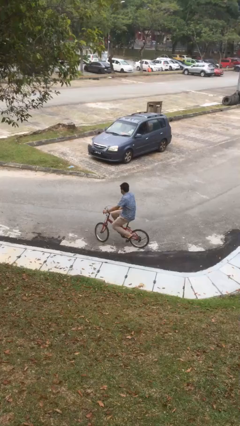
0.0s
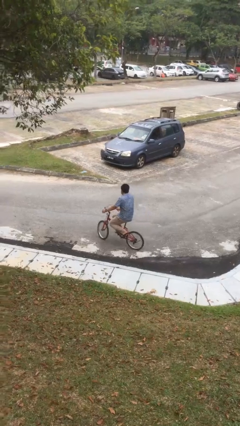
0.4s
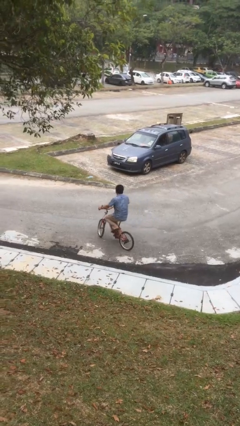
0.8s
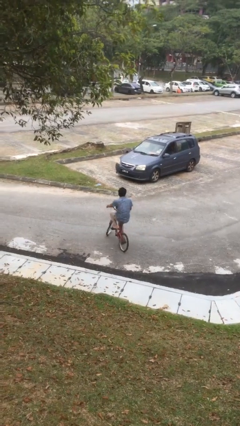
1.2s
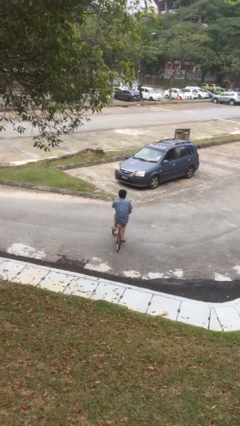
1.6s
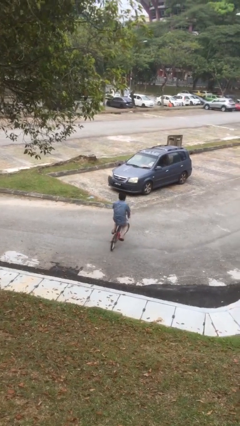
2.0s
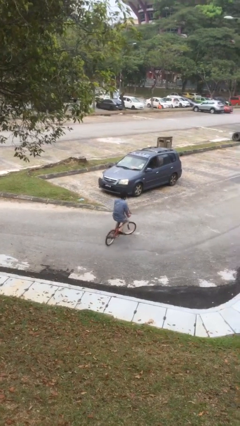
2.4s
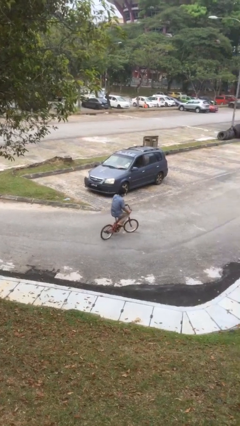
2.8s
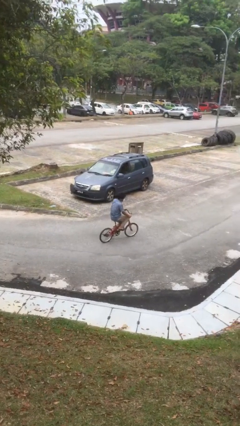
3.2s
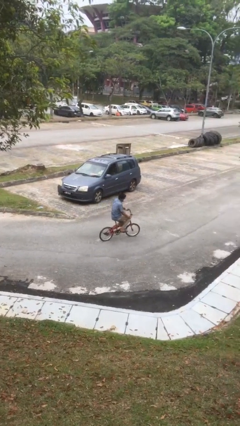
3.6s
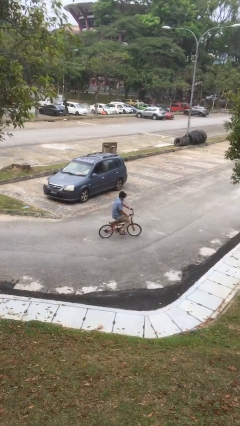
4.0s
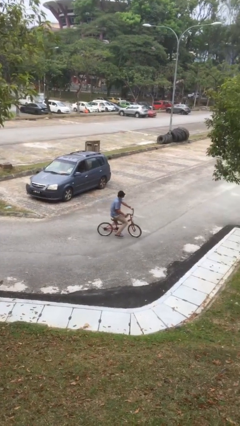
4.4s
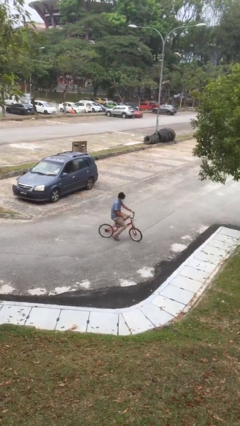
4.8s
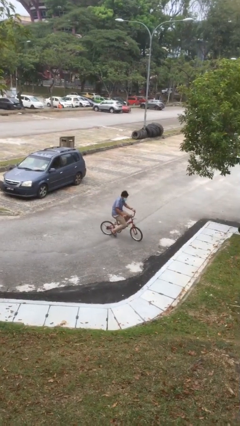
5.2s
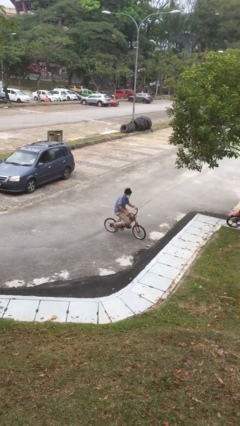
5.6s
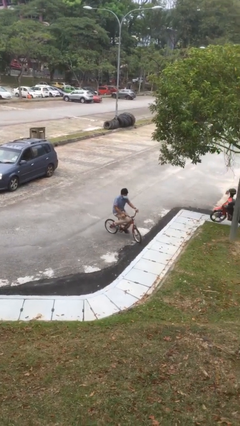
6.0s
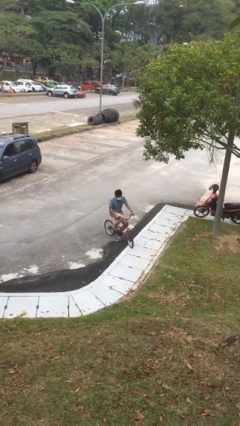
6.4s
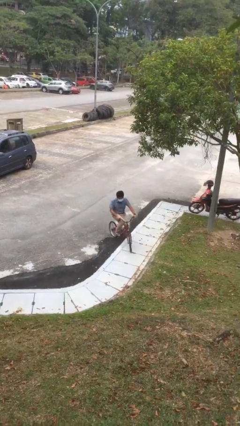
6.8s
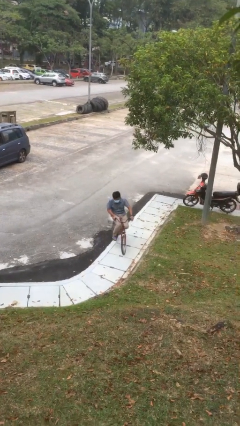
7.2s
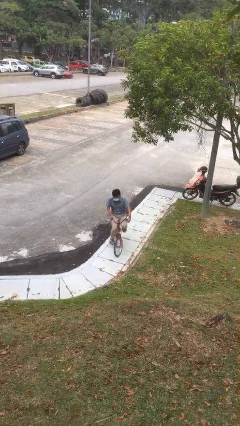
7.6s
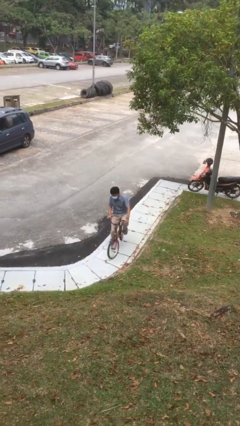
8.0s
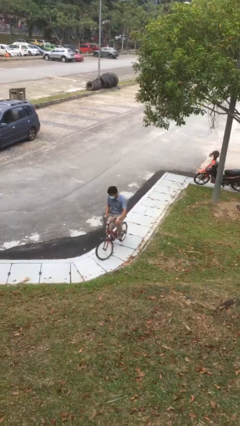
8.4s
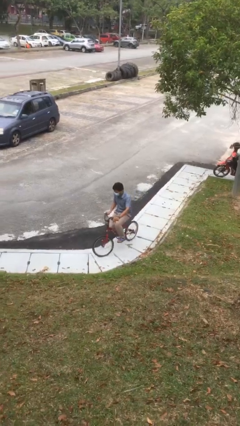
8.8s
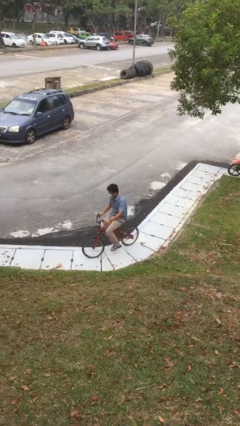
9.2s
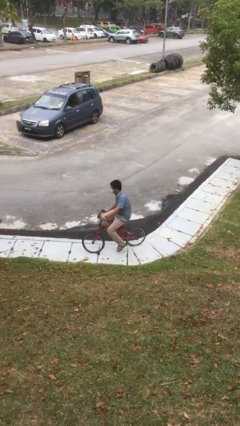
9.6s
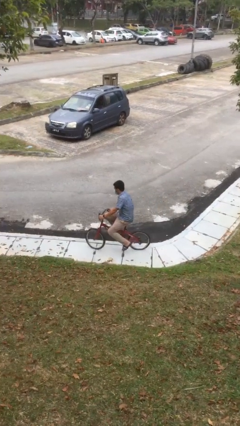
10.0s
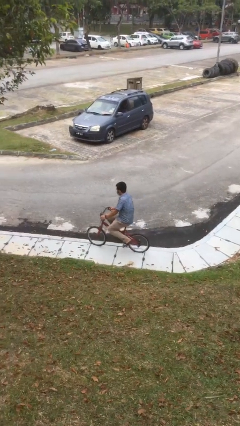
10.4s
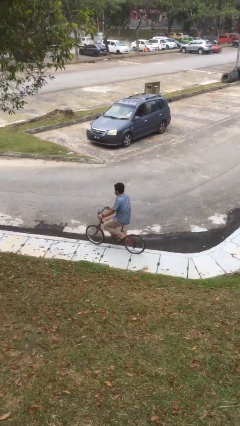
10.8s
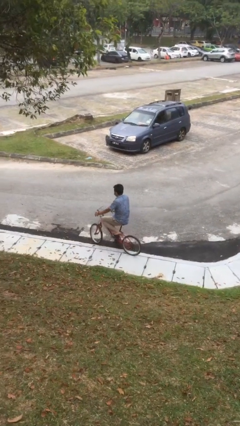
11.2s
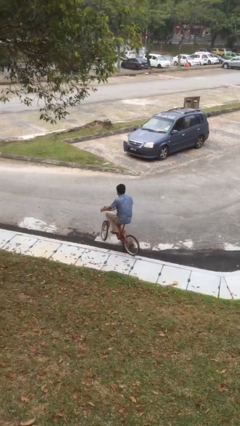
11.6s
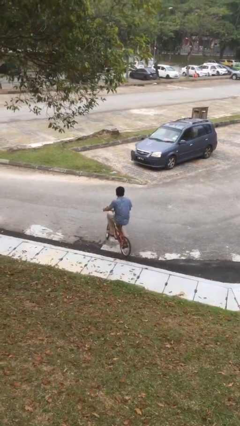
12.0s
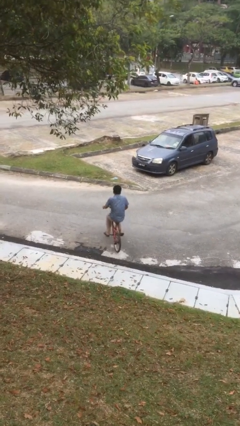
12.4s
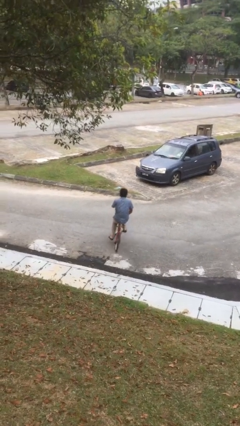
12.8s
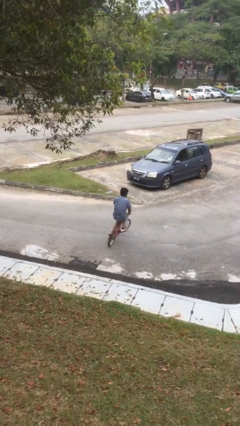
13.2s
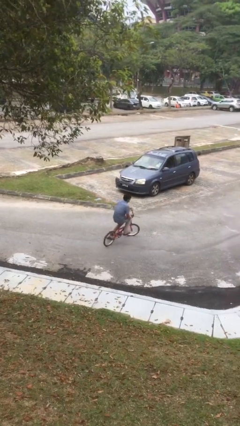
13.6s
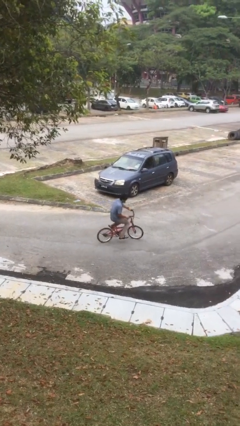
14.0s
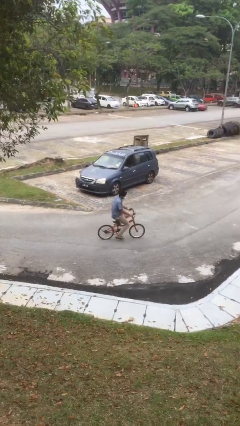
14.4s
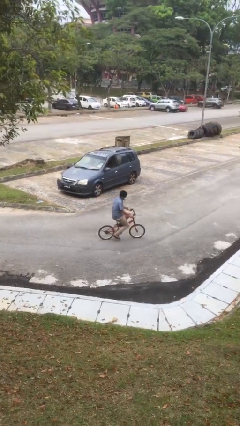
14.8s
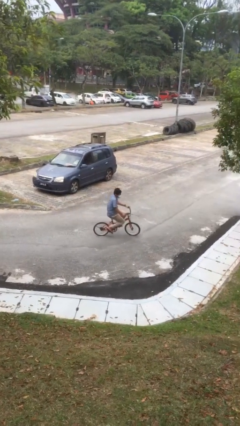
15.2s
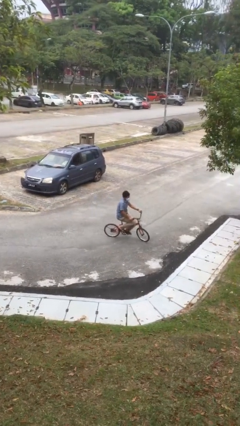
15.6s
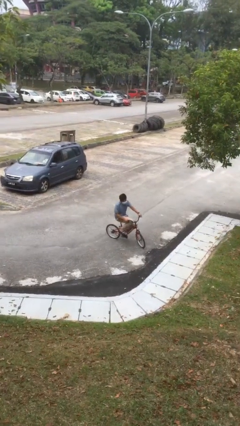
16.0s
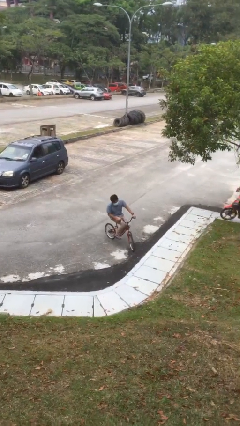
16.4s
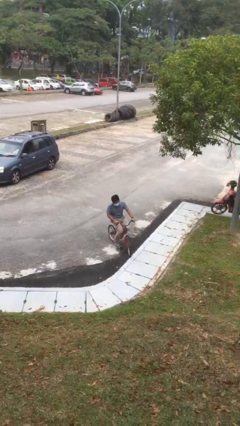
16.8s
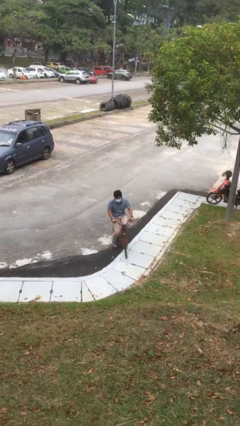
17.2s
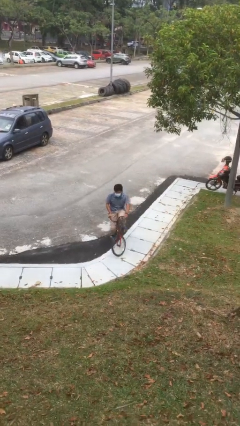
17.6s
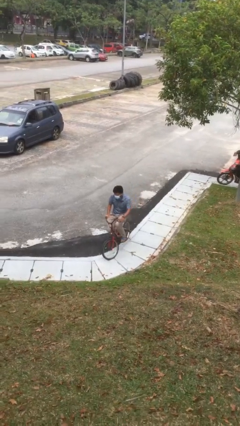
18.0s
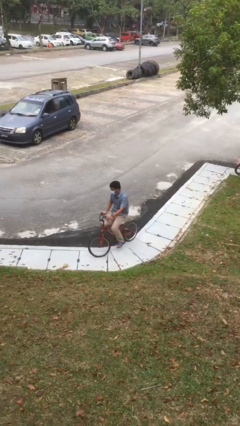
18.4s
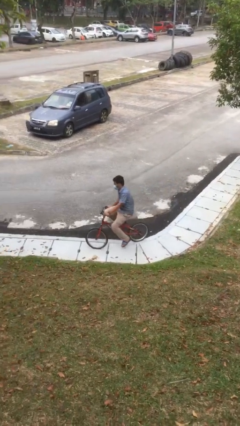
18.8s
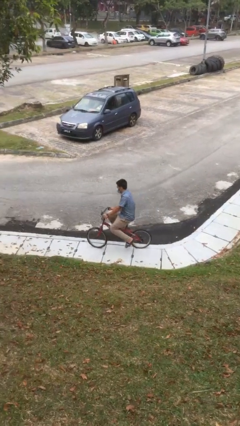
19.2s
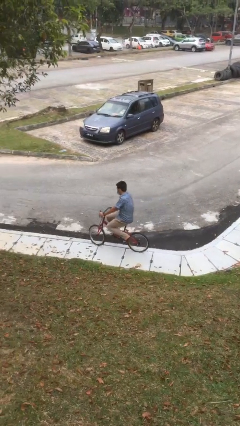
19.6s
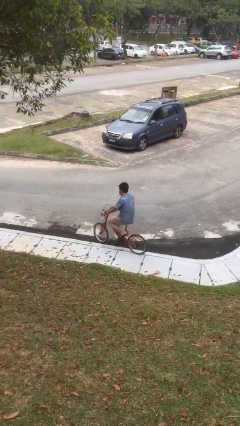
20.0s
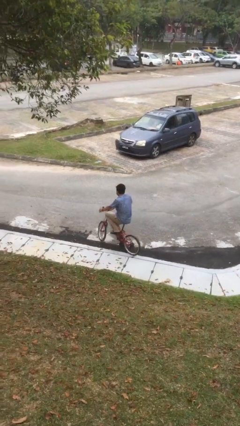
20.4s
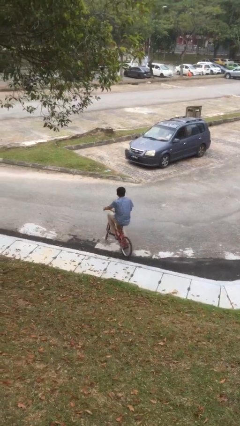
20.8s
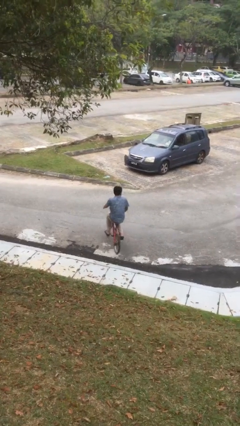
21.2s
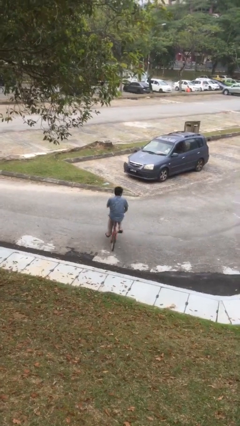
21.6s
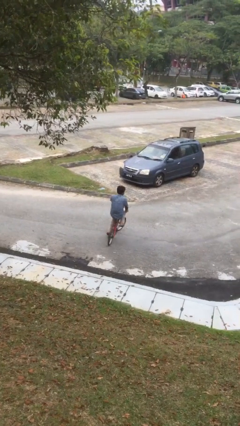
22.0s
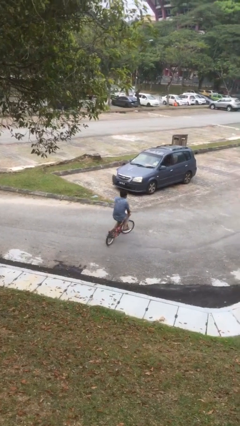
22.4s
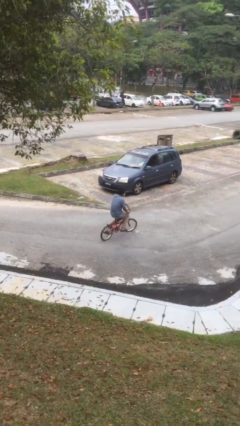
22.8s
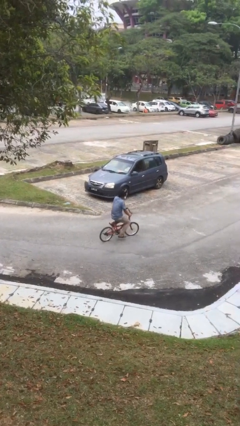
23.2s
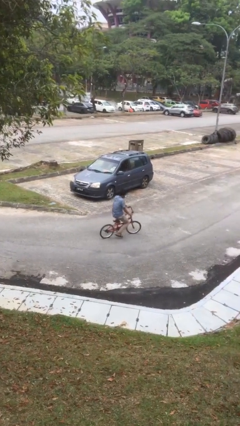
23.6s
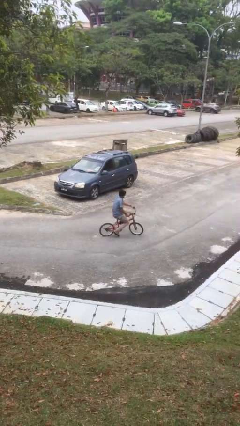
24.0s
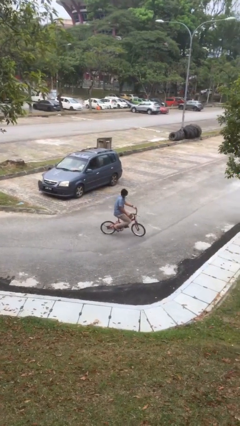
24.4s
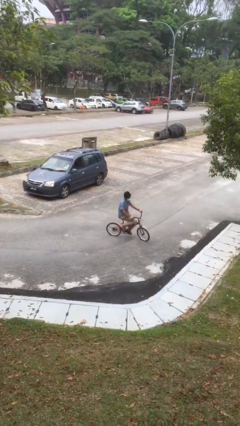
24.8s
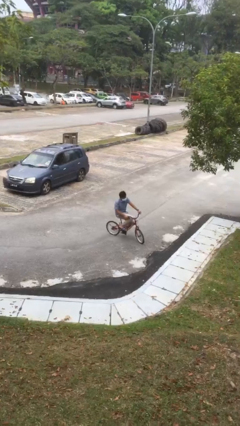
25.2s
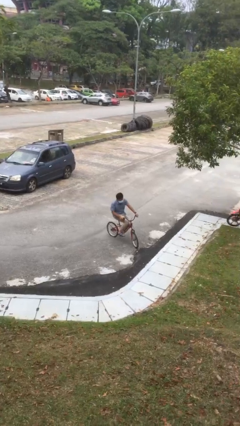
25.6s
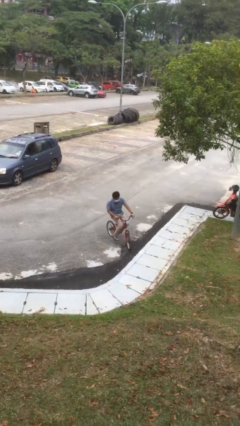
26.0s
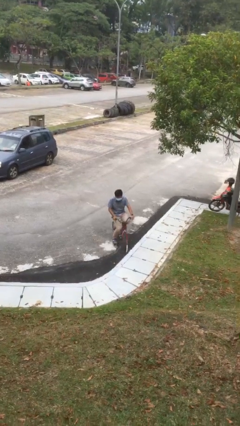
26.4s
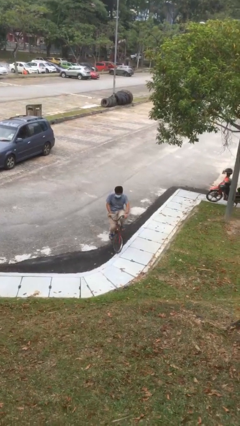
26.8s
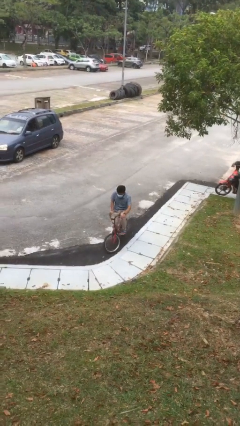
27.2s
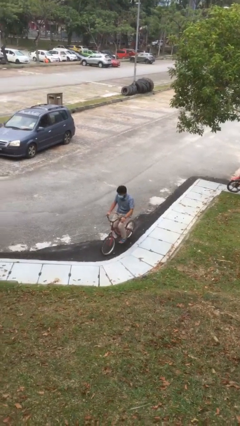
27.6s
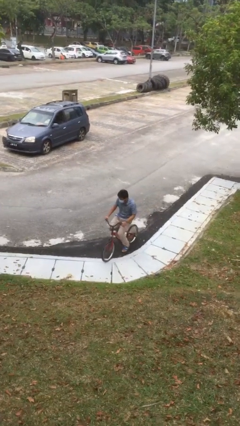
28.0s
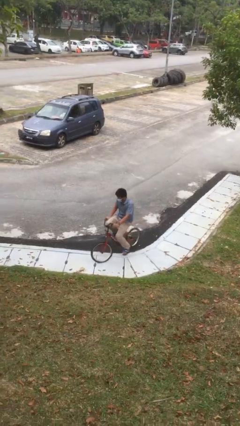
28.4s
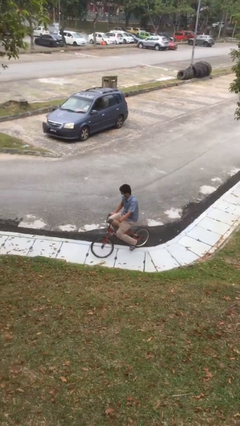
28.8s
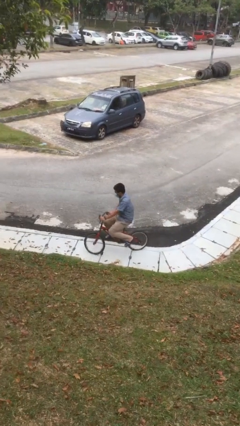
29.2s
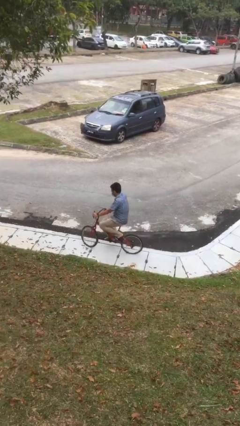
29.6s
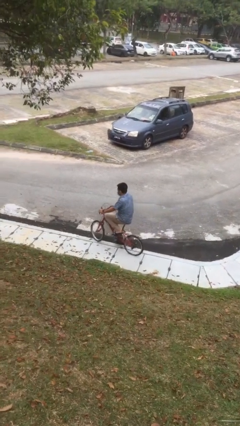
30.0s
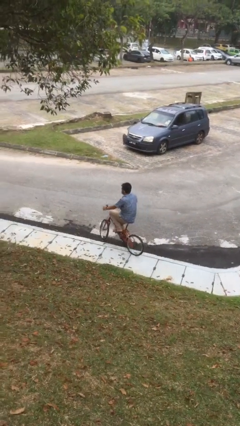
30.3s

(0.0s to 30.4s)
person rides bicycle

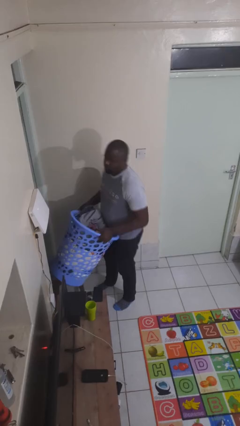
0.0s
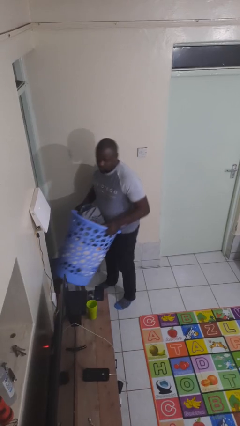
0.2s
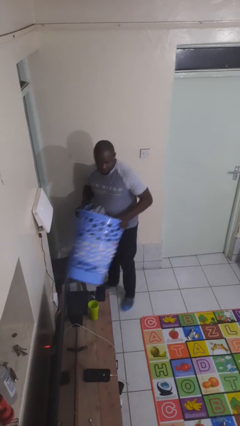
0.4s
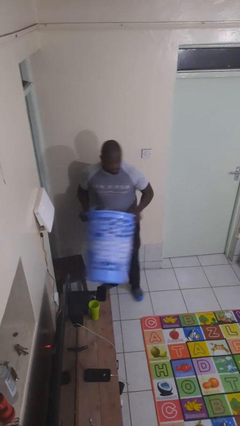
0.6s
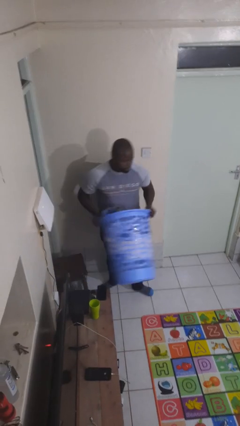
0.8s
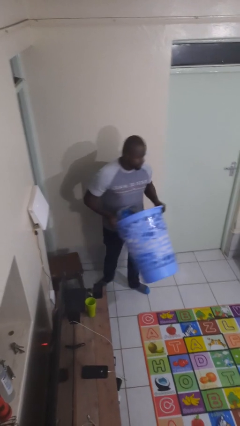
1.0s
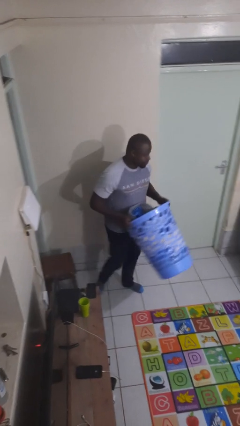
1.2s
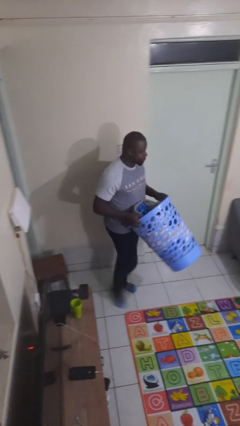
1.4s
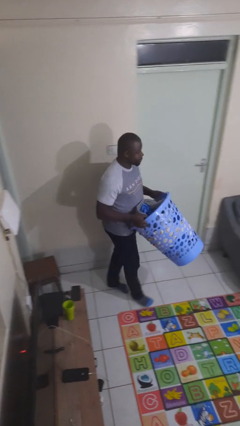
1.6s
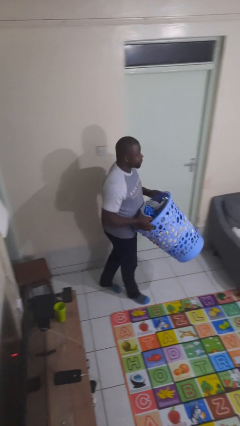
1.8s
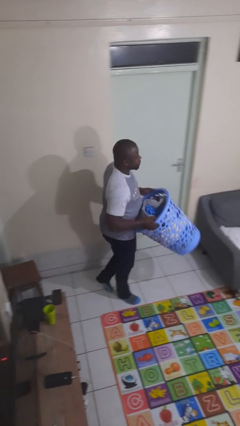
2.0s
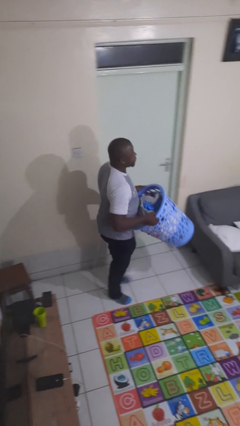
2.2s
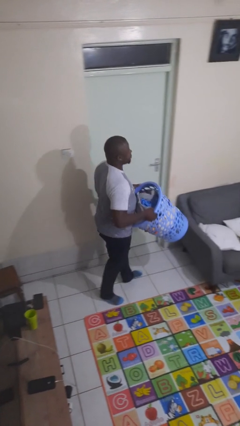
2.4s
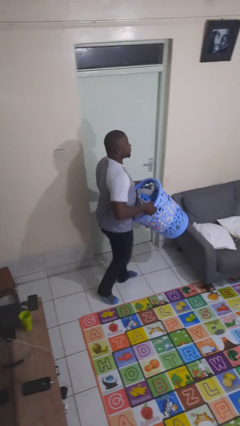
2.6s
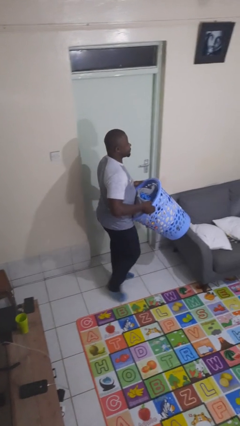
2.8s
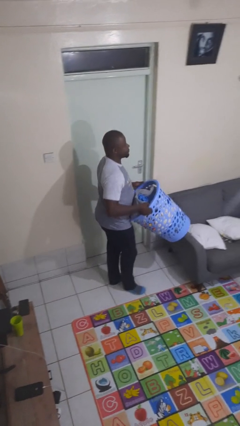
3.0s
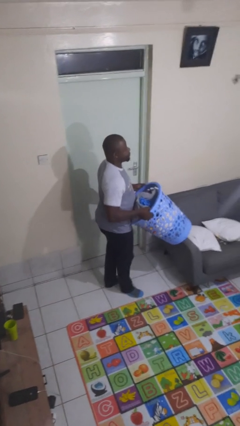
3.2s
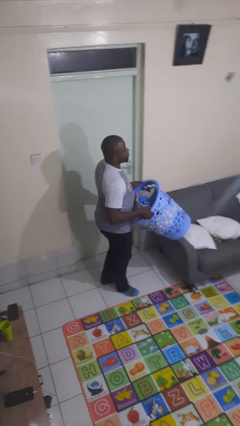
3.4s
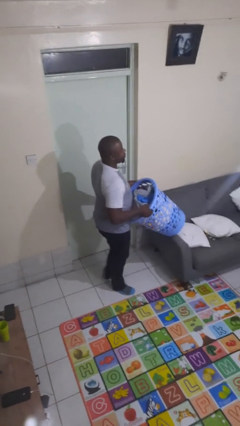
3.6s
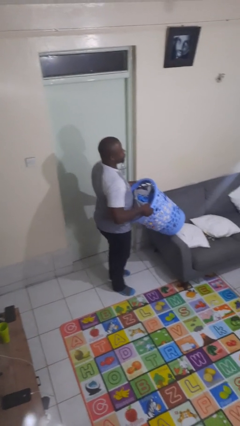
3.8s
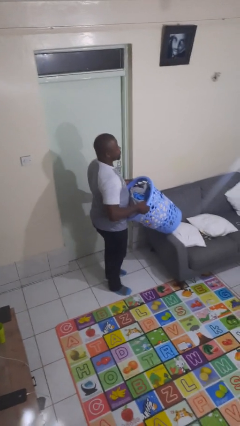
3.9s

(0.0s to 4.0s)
person carries laundry basket
